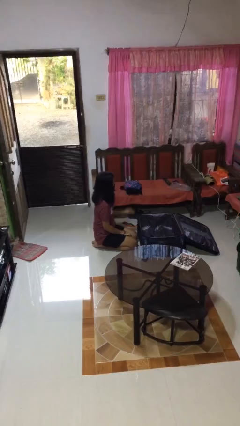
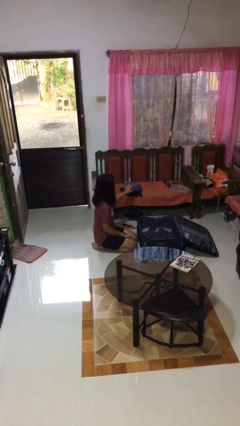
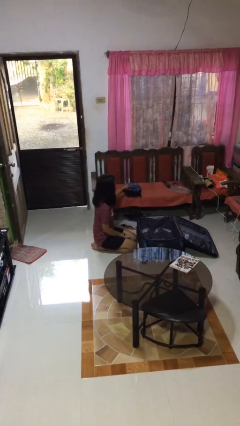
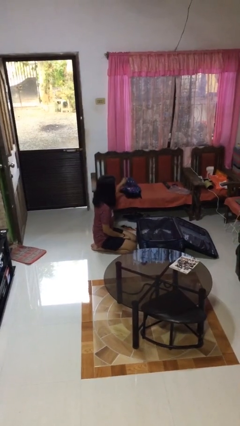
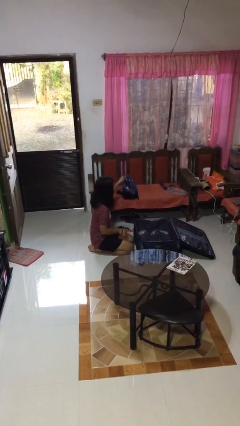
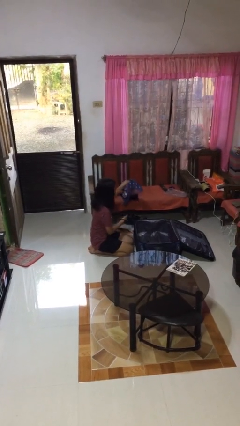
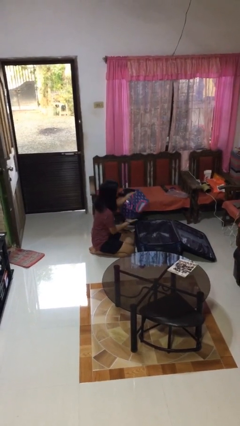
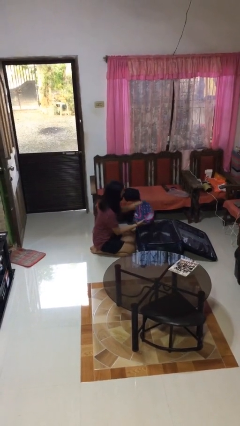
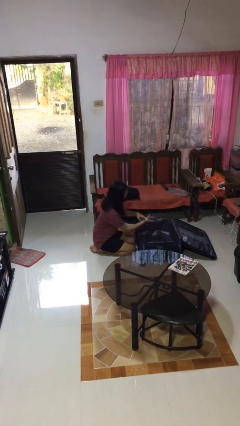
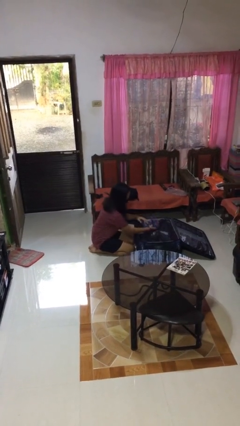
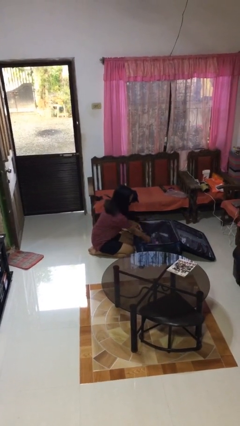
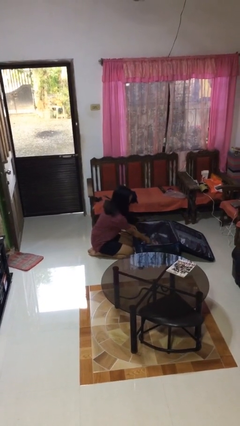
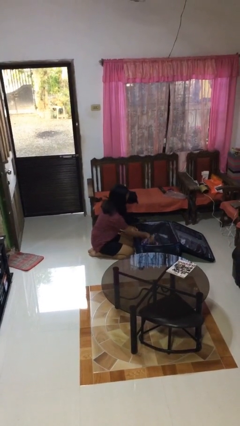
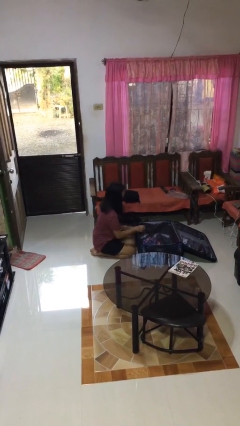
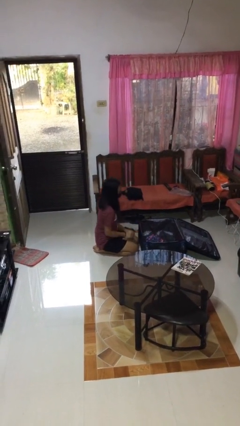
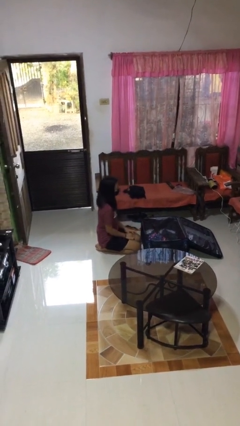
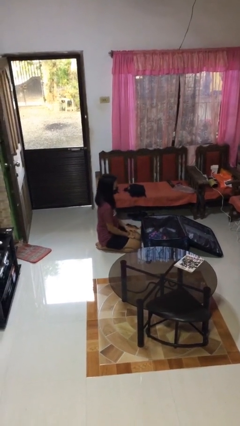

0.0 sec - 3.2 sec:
person loads clothes into suitcase

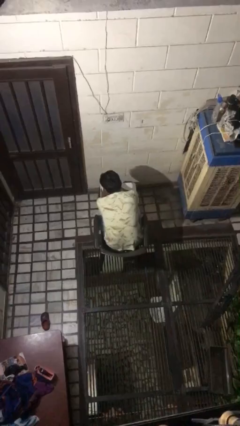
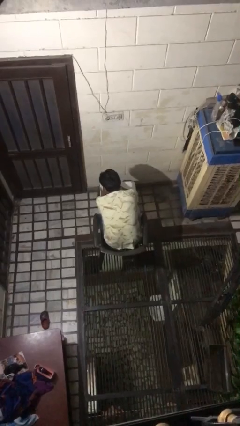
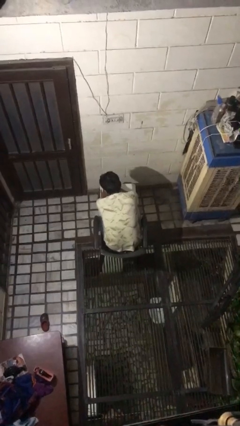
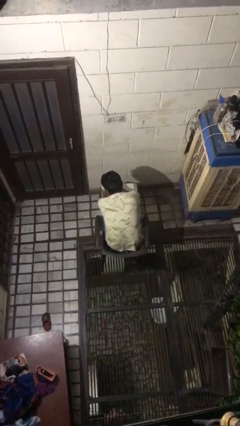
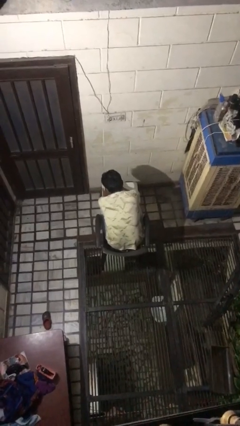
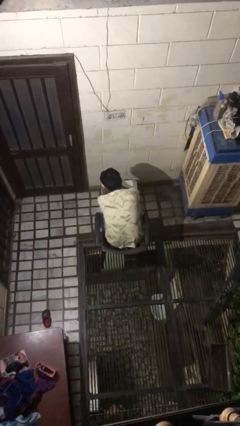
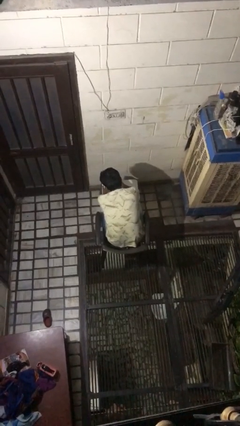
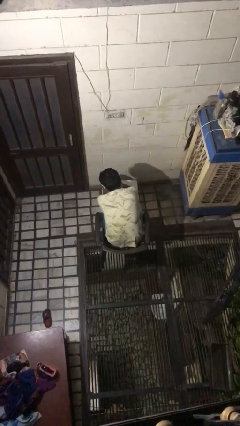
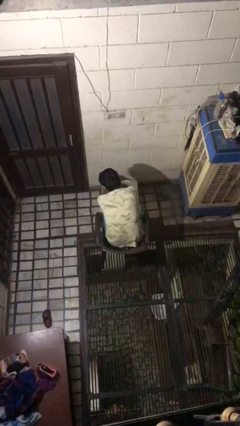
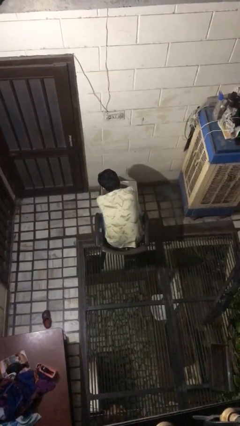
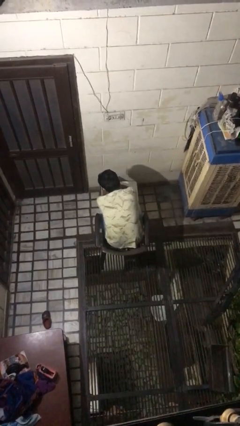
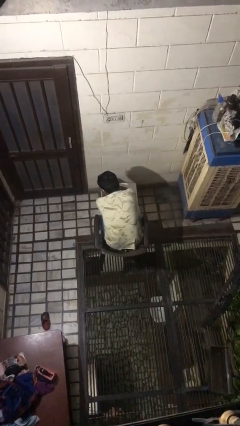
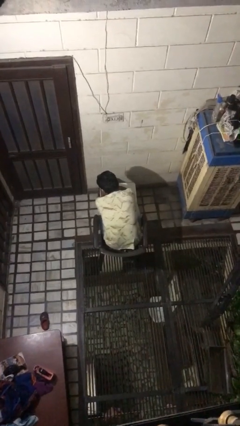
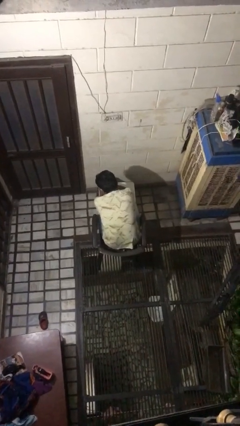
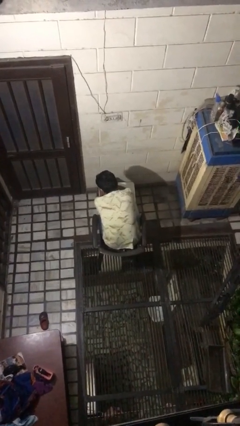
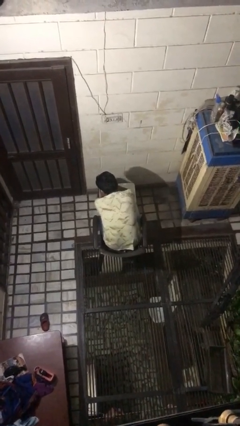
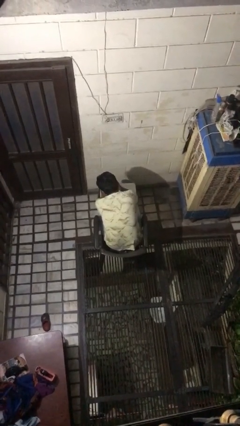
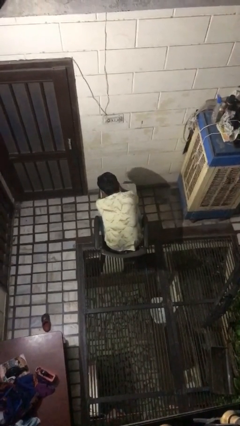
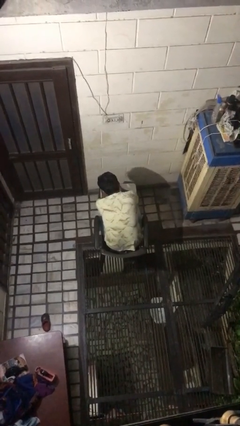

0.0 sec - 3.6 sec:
person paints fingernails

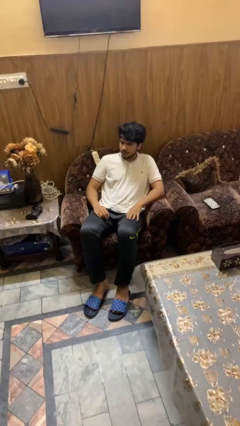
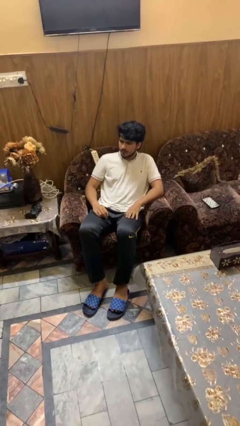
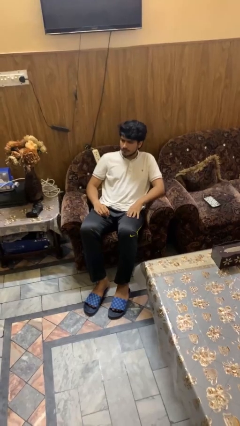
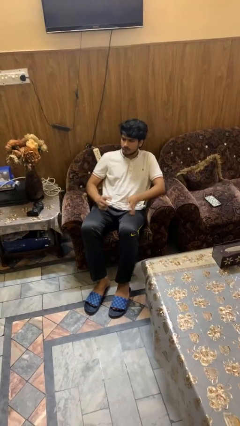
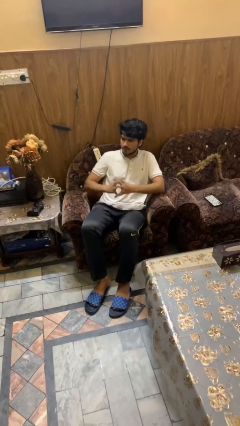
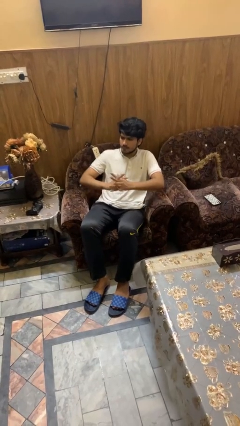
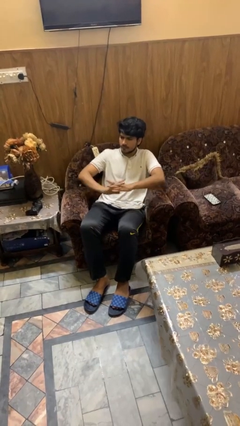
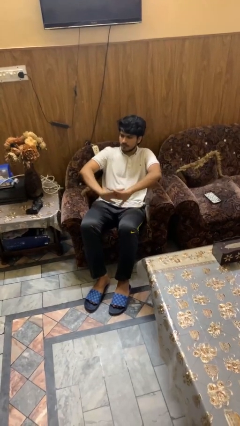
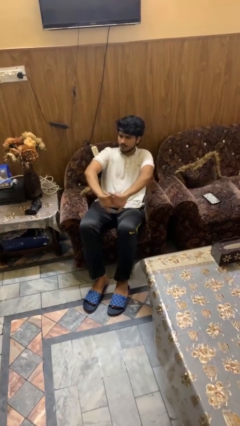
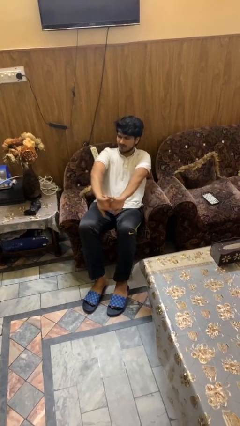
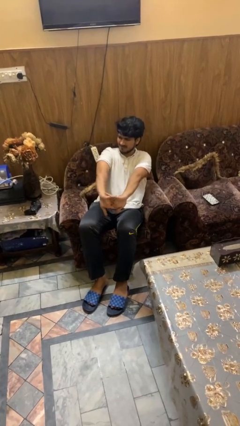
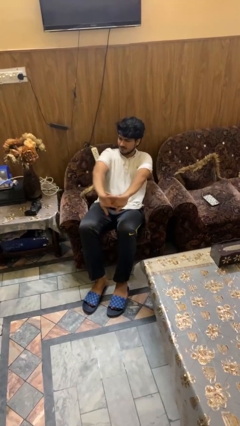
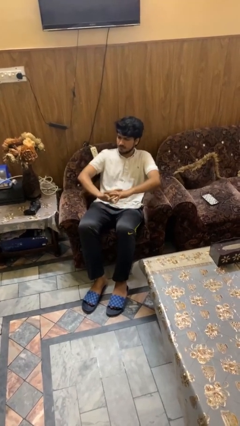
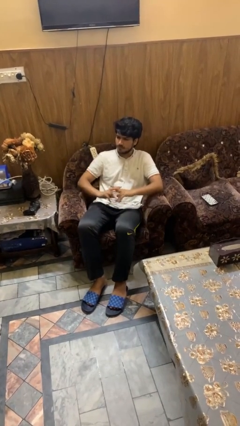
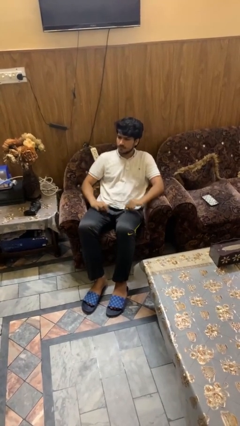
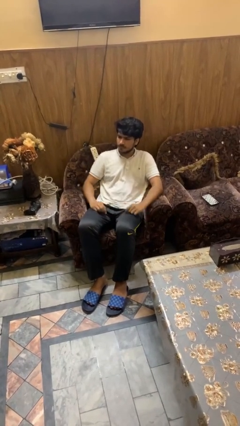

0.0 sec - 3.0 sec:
person cracks knuckles

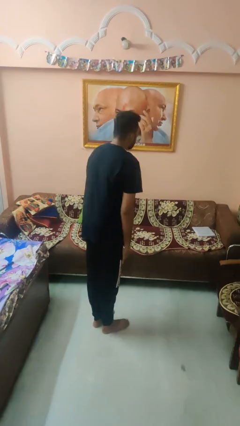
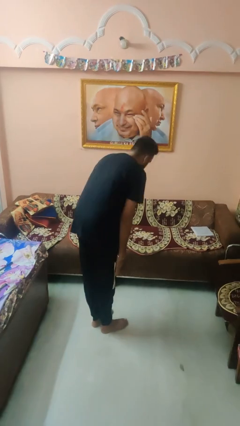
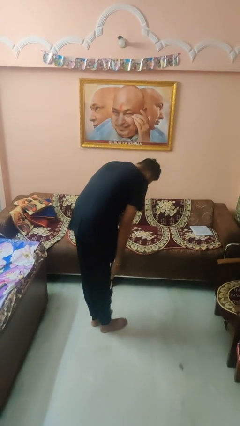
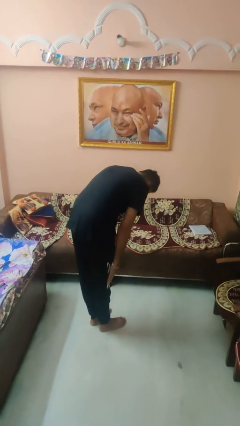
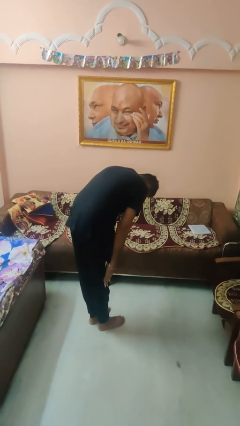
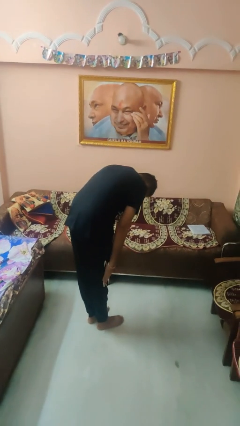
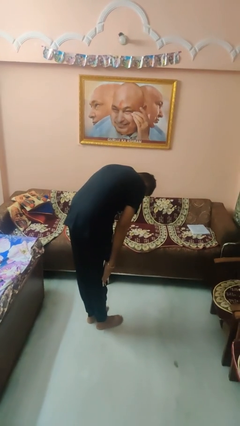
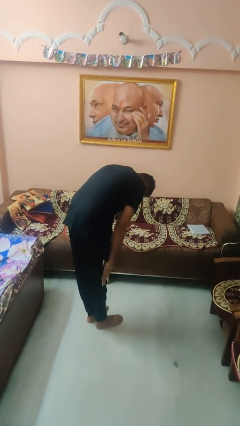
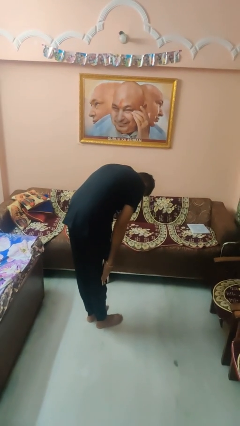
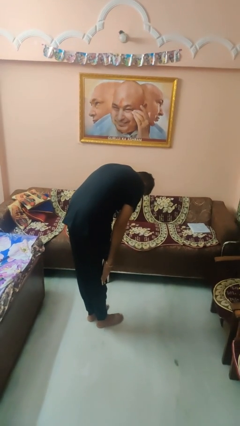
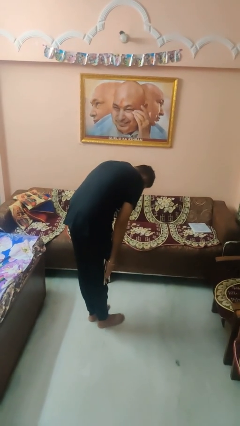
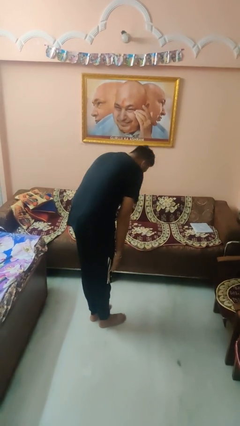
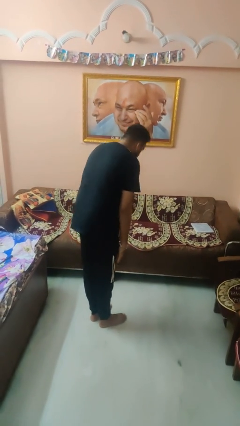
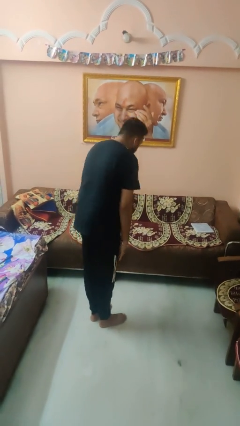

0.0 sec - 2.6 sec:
person bows

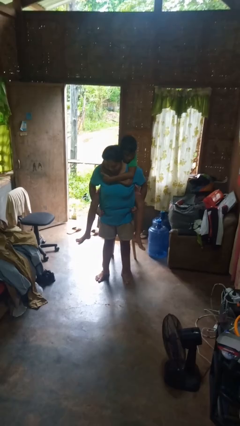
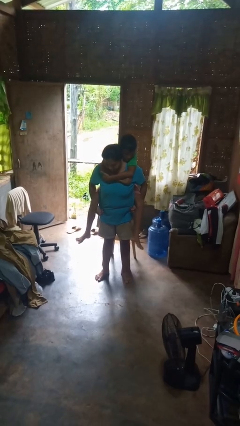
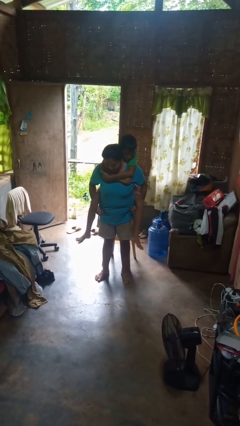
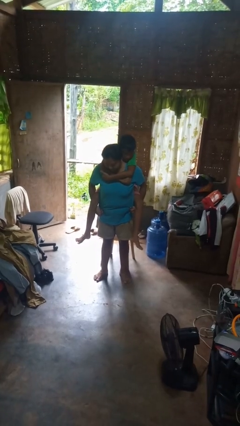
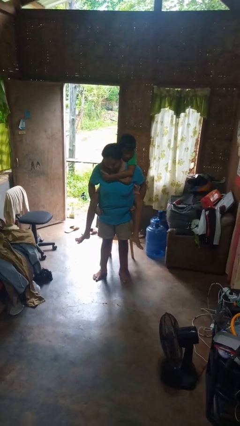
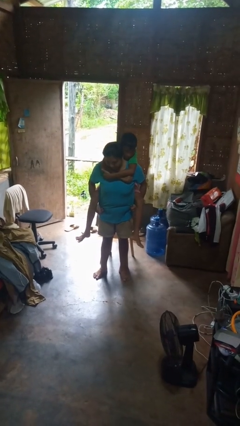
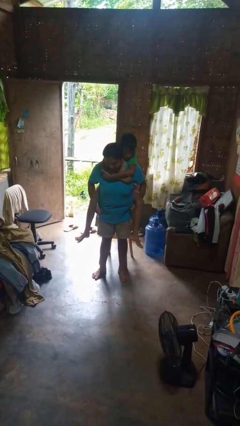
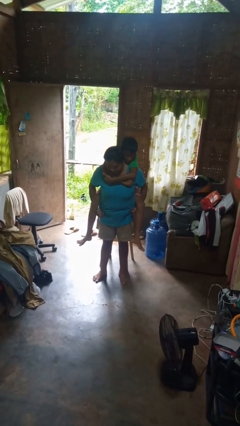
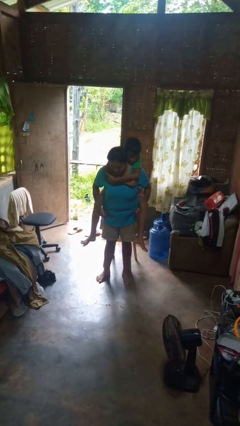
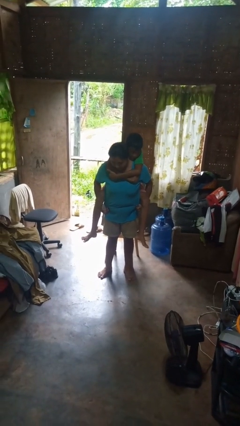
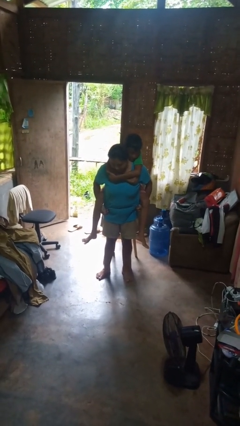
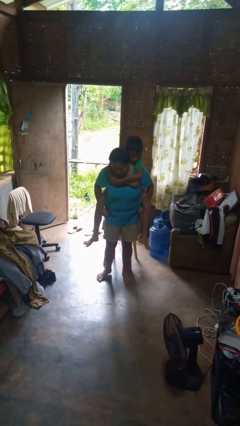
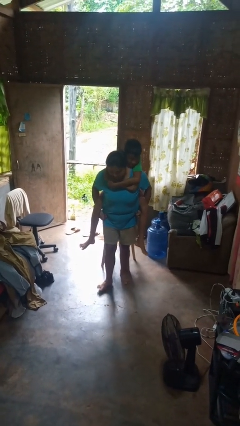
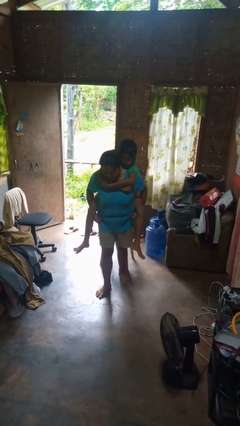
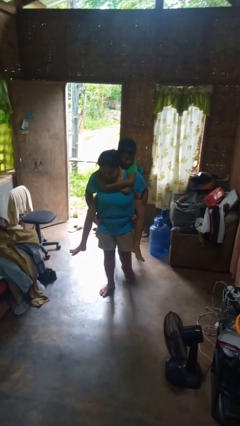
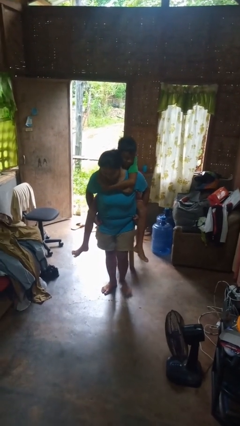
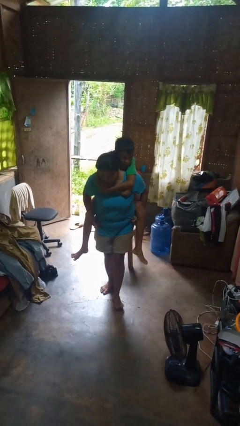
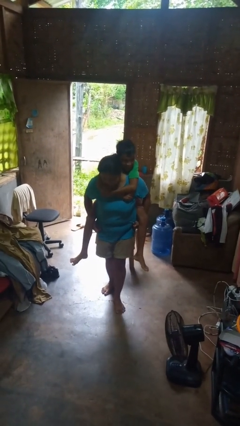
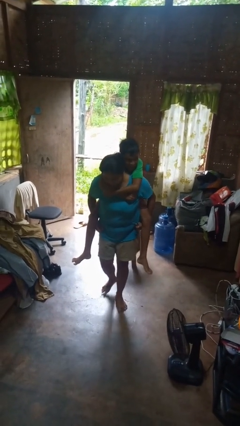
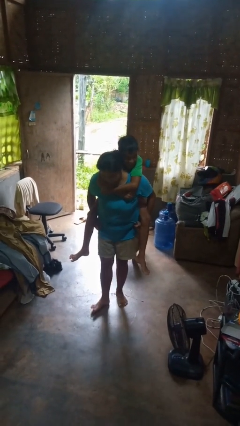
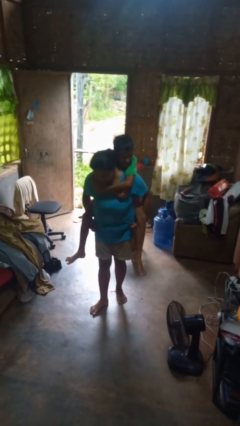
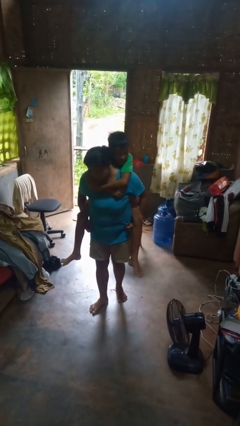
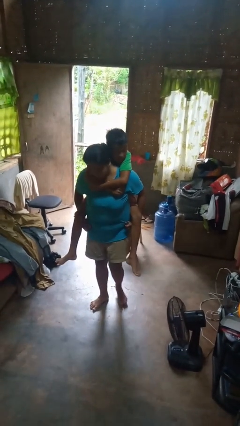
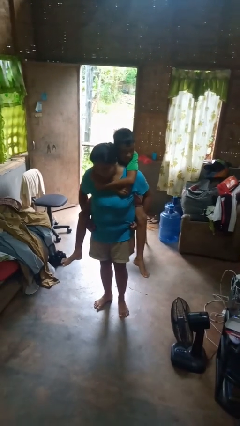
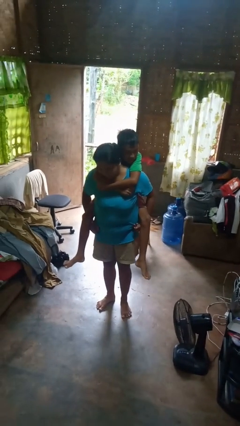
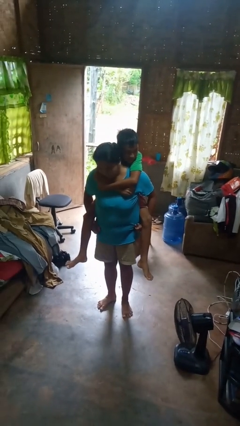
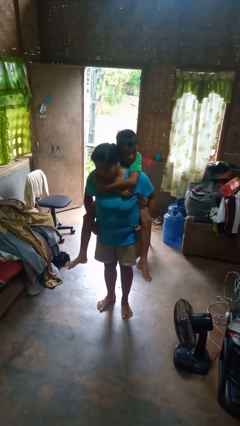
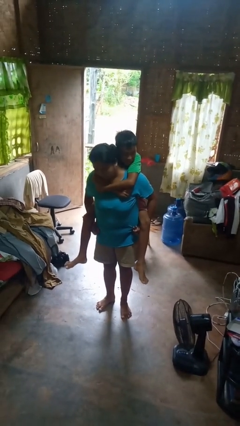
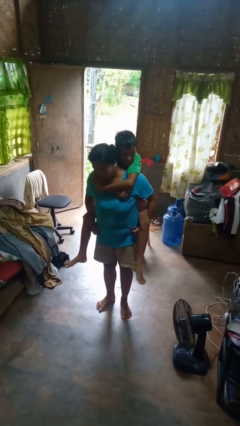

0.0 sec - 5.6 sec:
person carries person on back
